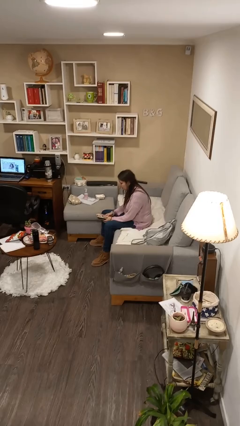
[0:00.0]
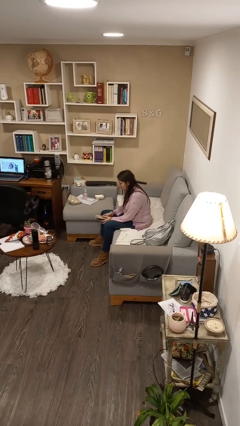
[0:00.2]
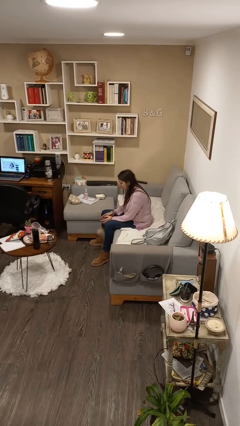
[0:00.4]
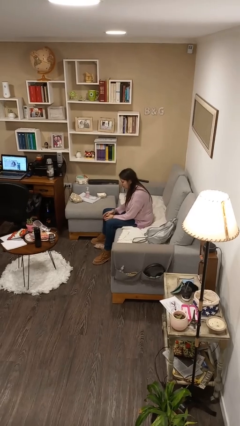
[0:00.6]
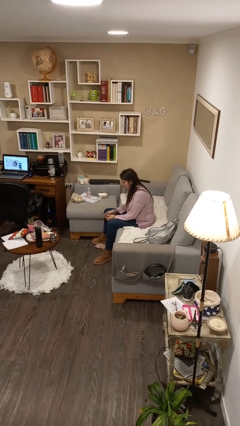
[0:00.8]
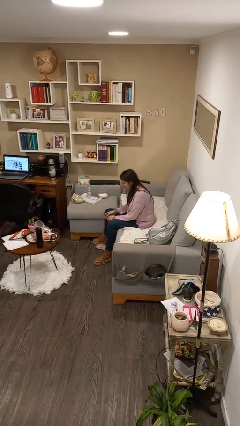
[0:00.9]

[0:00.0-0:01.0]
person drops object

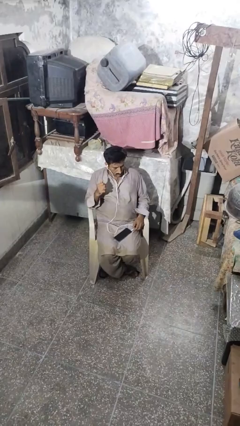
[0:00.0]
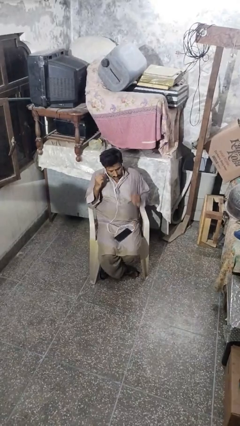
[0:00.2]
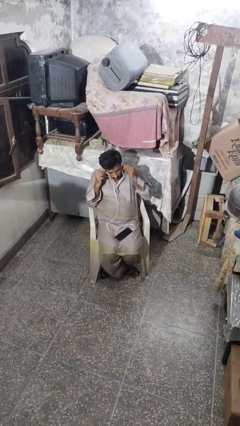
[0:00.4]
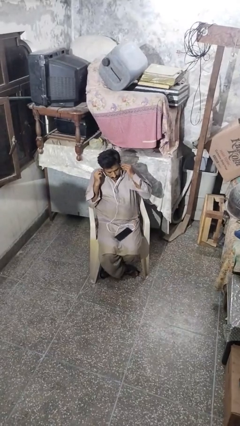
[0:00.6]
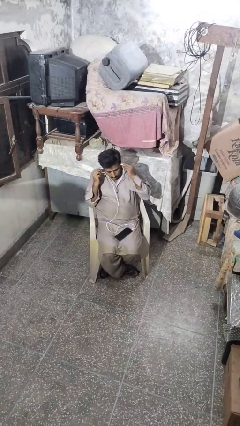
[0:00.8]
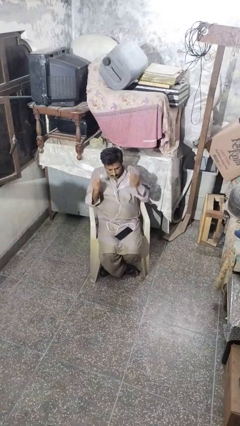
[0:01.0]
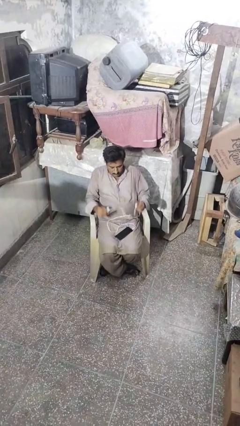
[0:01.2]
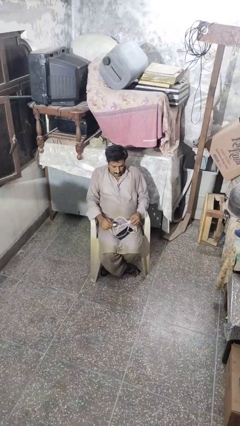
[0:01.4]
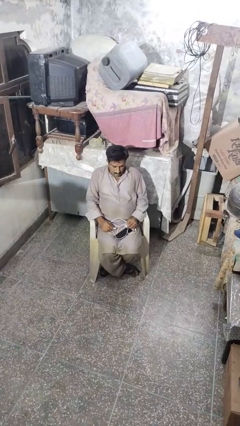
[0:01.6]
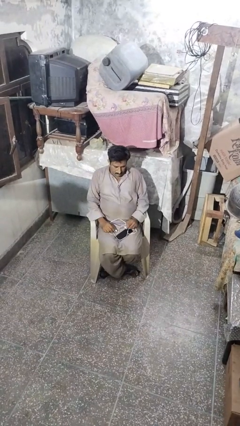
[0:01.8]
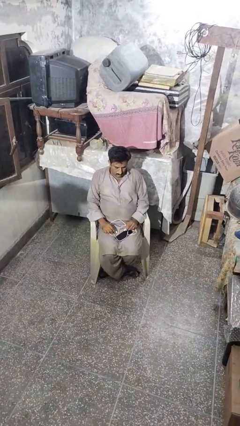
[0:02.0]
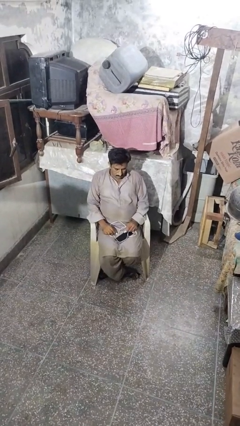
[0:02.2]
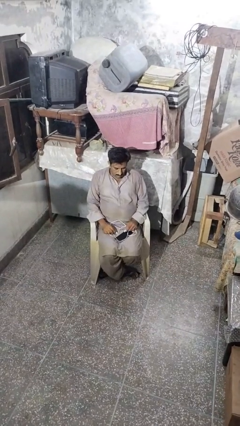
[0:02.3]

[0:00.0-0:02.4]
person takes off headphones

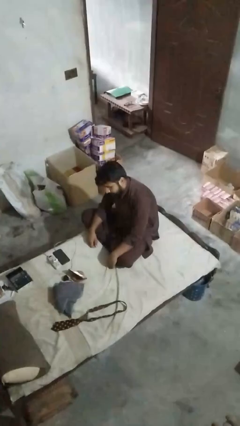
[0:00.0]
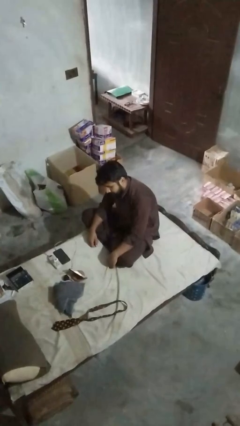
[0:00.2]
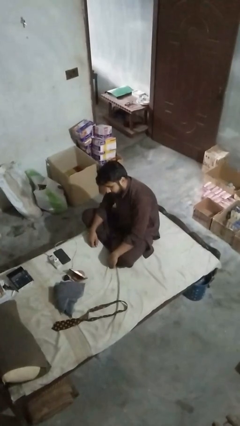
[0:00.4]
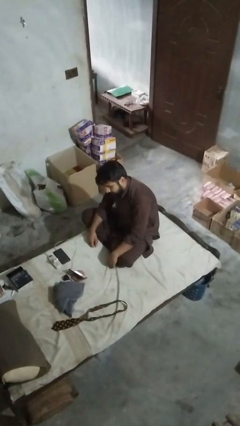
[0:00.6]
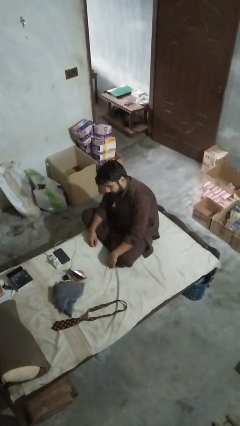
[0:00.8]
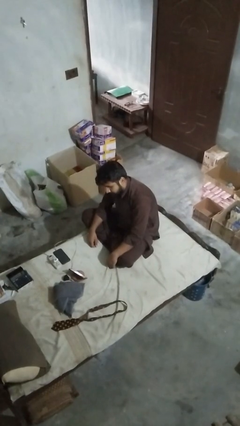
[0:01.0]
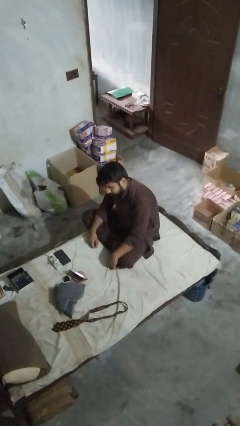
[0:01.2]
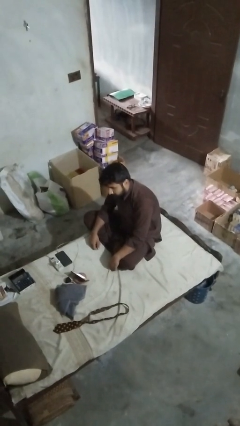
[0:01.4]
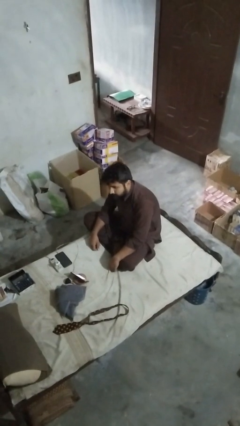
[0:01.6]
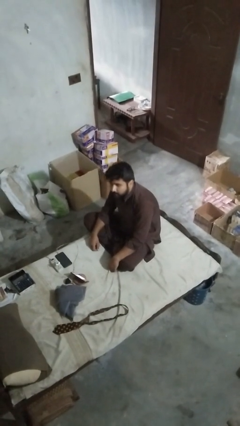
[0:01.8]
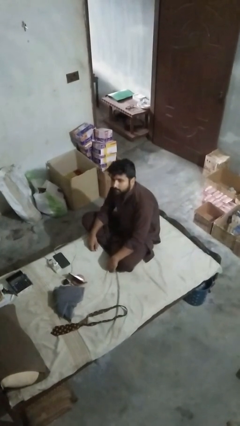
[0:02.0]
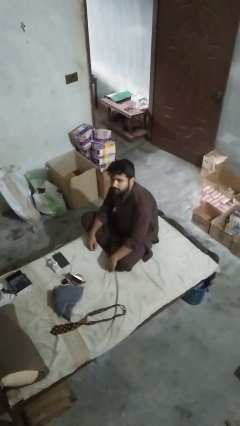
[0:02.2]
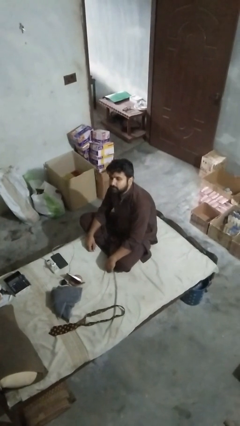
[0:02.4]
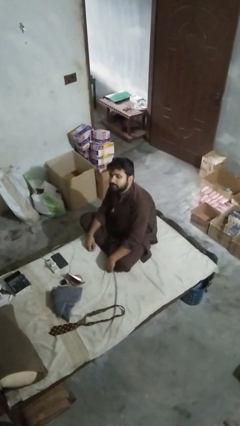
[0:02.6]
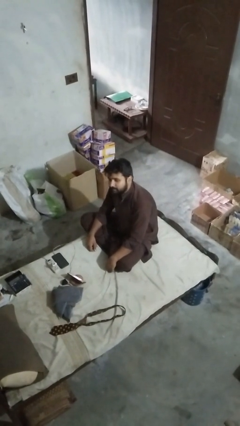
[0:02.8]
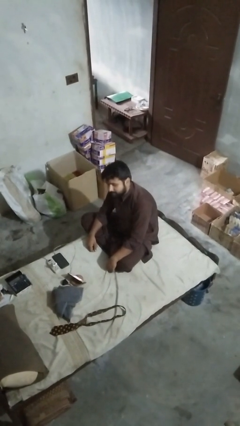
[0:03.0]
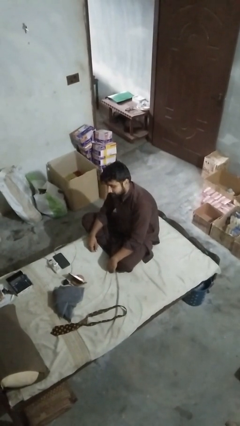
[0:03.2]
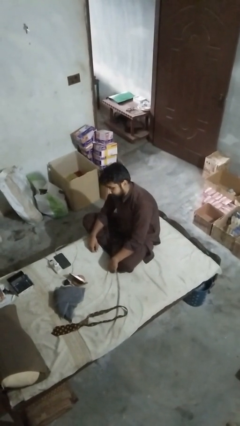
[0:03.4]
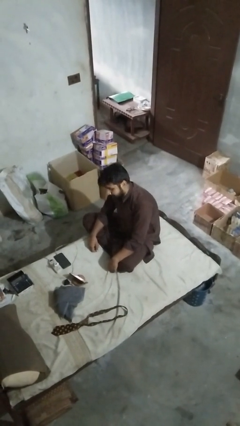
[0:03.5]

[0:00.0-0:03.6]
person gestures blow kiss

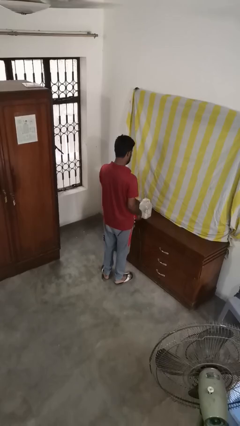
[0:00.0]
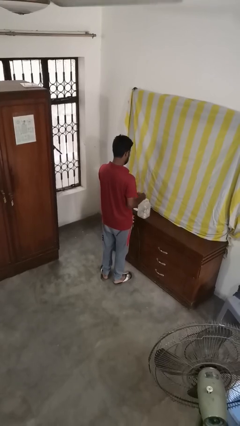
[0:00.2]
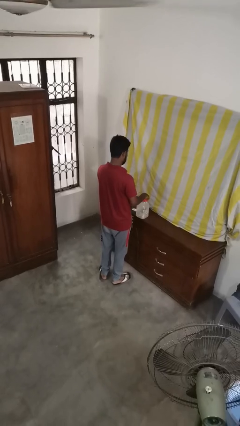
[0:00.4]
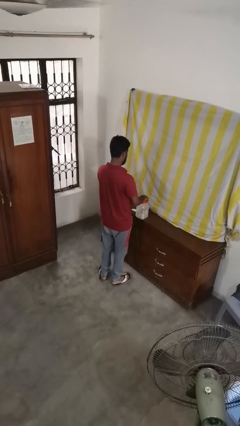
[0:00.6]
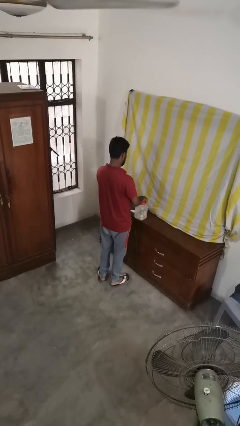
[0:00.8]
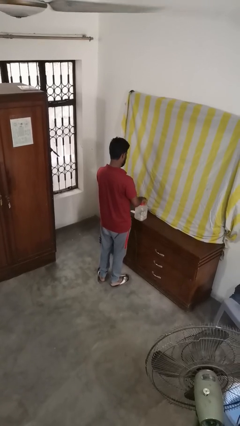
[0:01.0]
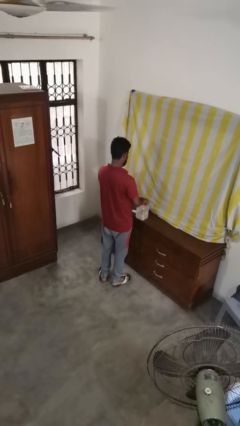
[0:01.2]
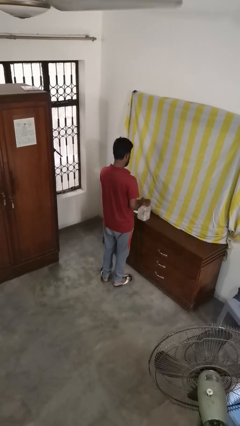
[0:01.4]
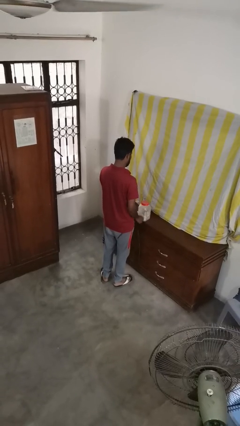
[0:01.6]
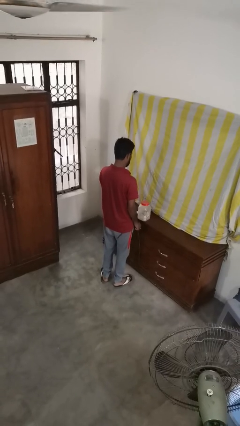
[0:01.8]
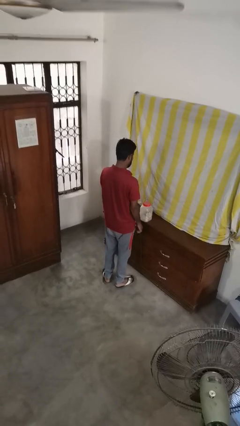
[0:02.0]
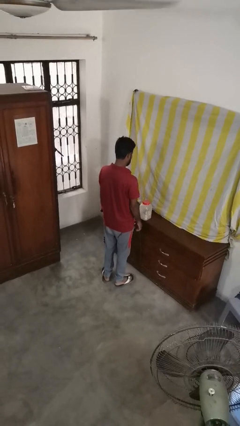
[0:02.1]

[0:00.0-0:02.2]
person closes jar

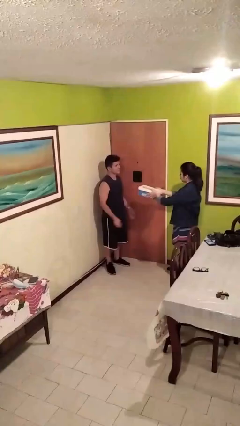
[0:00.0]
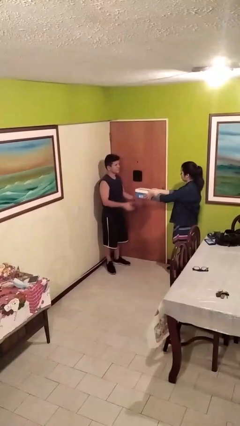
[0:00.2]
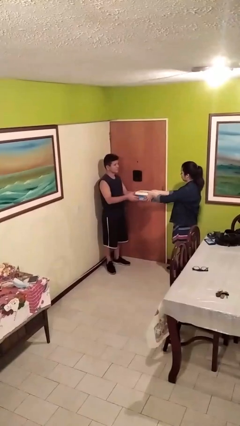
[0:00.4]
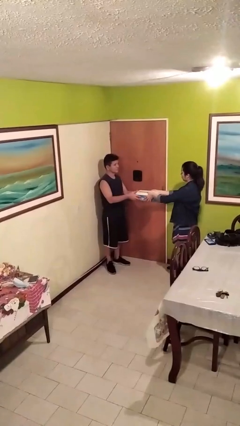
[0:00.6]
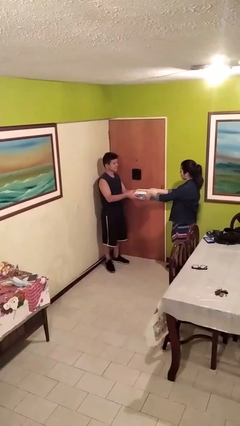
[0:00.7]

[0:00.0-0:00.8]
person transfers object to person

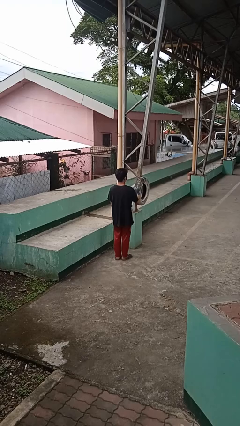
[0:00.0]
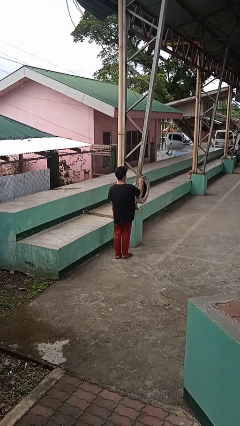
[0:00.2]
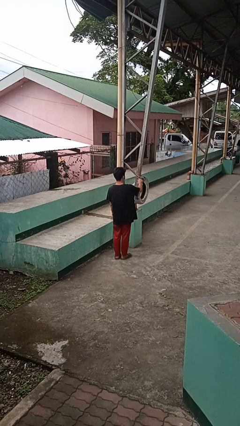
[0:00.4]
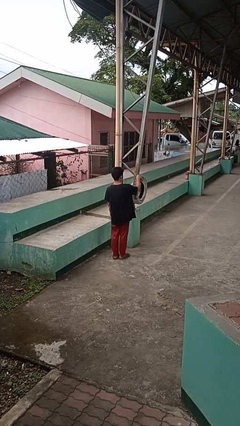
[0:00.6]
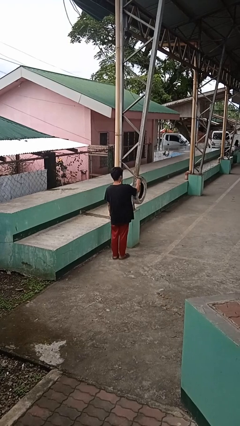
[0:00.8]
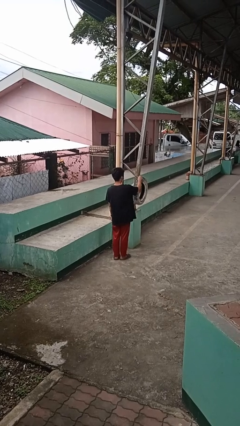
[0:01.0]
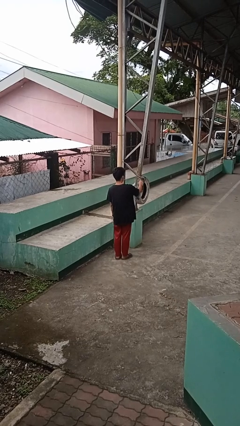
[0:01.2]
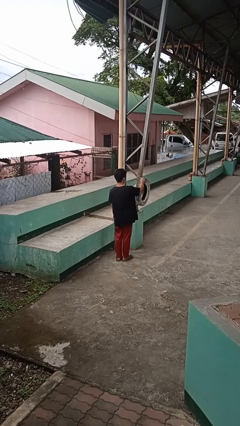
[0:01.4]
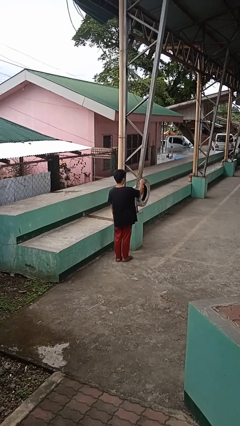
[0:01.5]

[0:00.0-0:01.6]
person taps object with finger

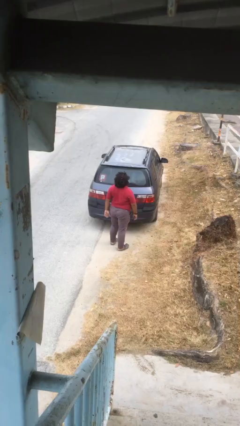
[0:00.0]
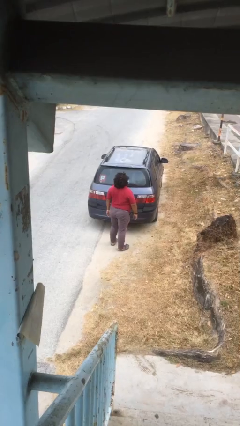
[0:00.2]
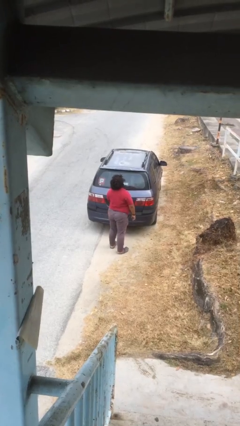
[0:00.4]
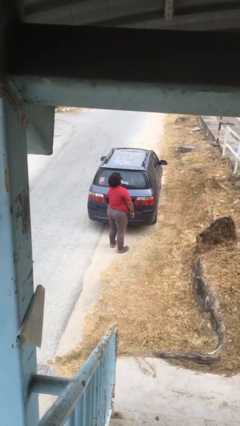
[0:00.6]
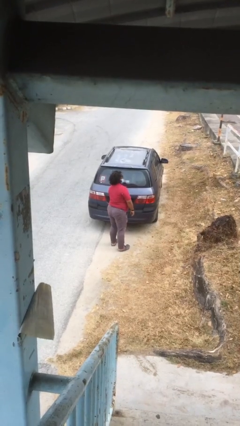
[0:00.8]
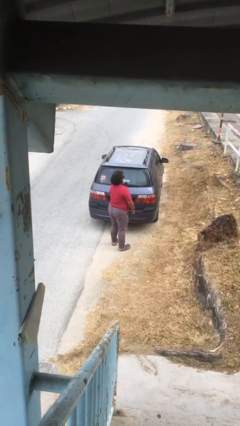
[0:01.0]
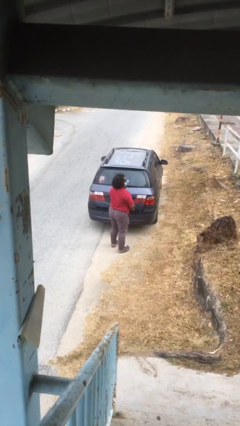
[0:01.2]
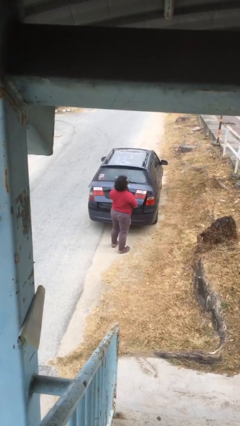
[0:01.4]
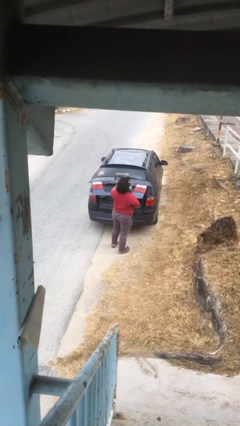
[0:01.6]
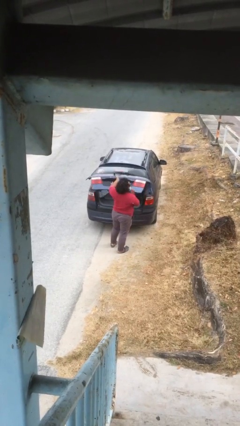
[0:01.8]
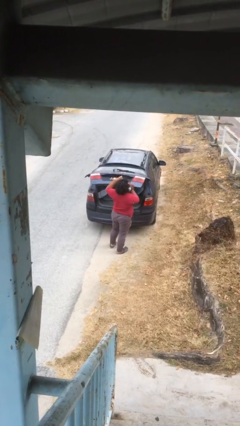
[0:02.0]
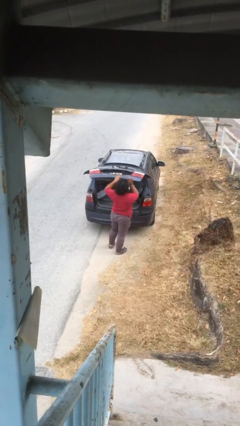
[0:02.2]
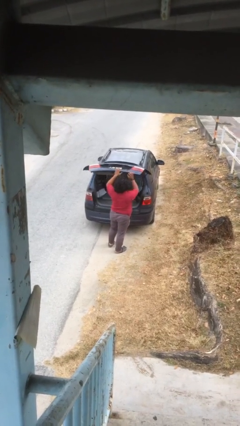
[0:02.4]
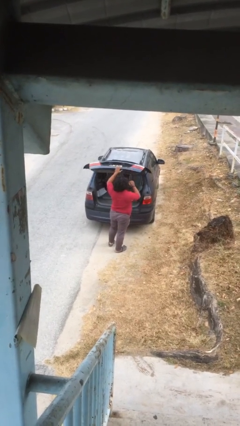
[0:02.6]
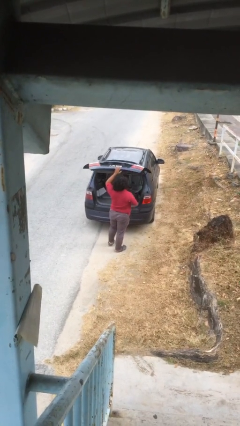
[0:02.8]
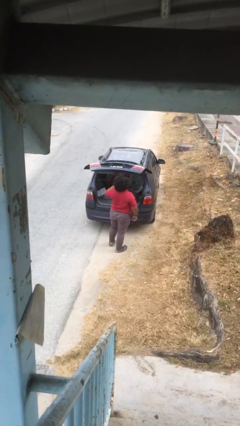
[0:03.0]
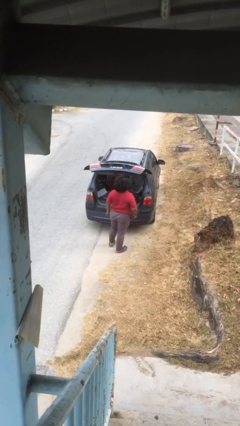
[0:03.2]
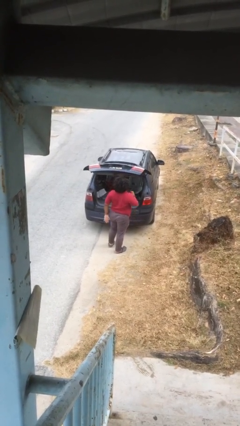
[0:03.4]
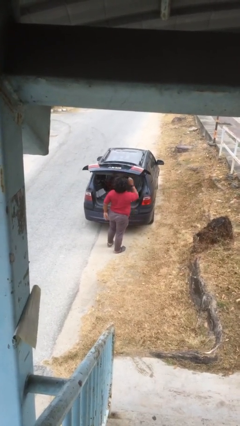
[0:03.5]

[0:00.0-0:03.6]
person opens car trunk

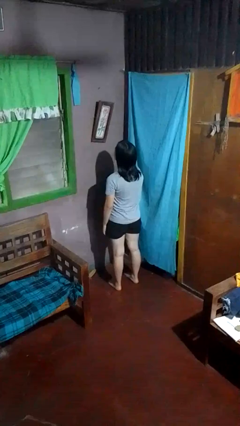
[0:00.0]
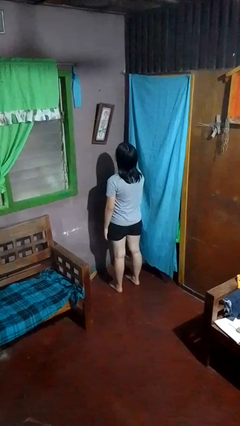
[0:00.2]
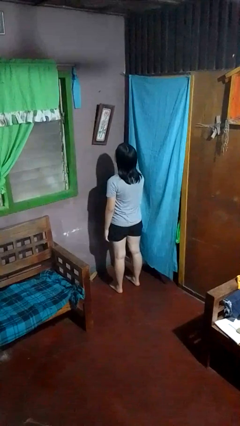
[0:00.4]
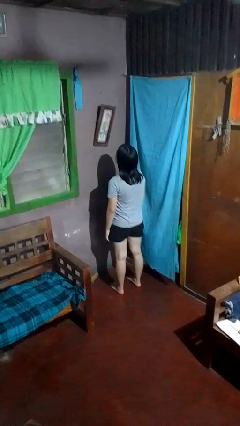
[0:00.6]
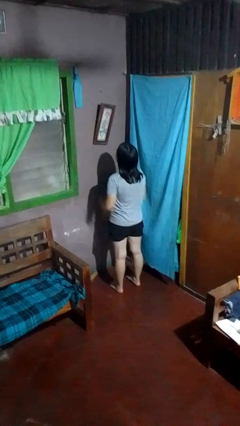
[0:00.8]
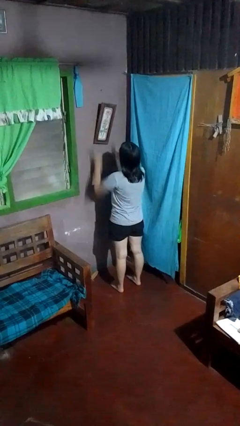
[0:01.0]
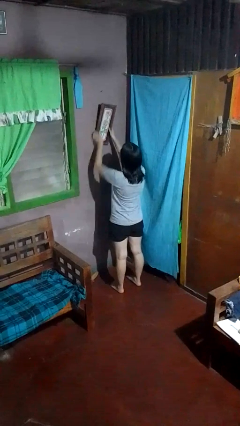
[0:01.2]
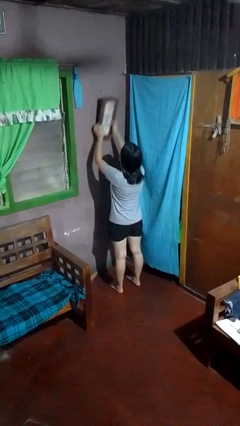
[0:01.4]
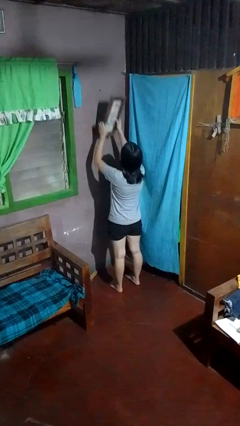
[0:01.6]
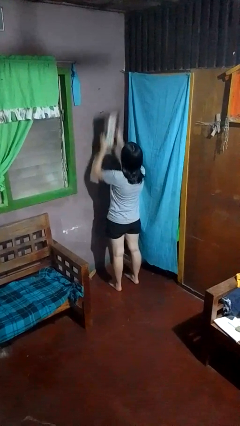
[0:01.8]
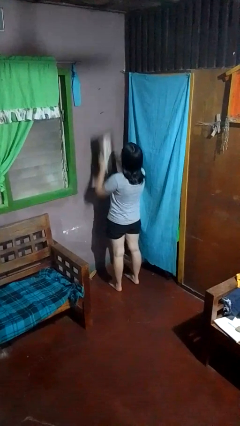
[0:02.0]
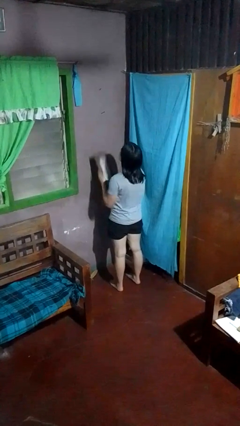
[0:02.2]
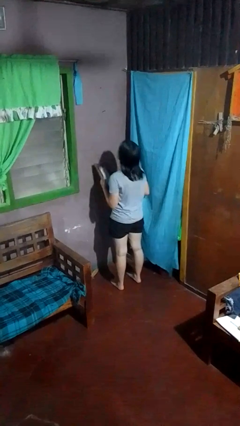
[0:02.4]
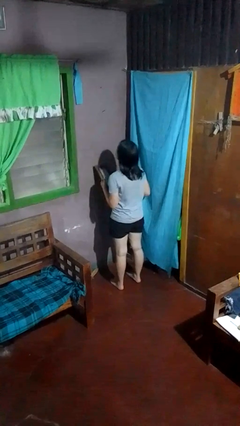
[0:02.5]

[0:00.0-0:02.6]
person takes down picture frame
